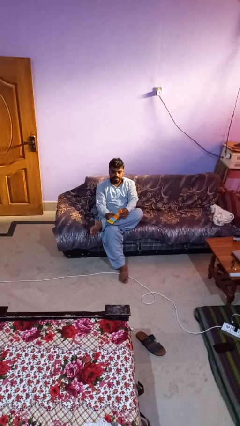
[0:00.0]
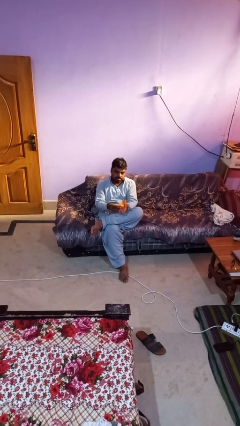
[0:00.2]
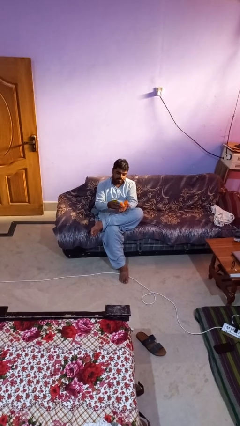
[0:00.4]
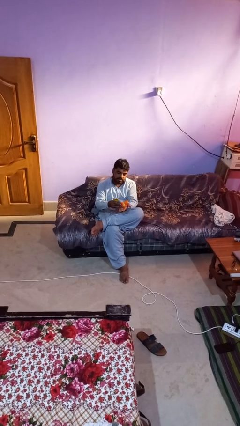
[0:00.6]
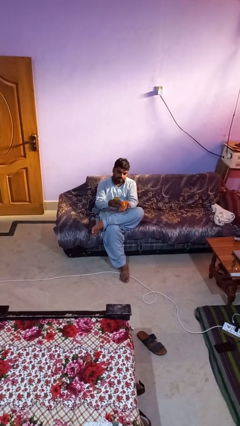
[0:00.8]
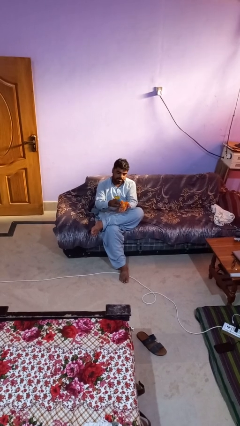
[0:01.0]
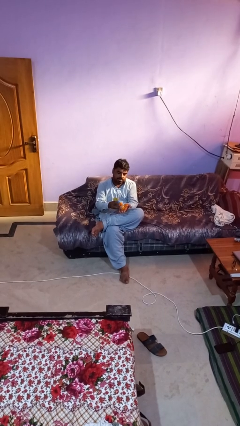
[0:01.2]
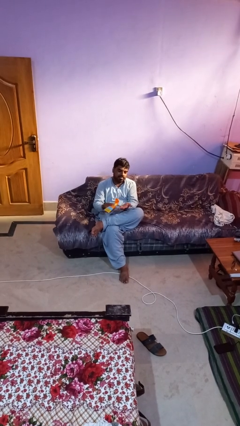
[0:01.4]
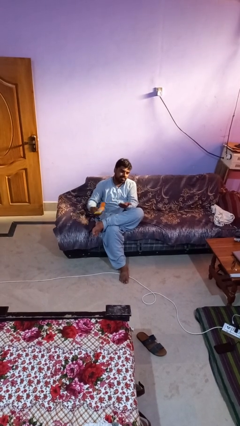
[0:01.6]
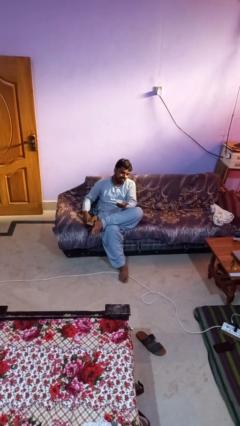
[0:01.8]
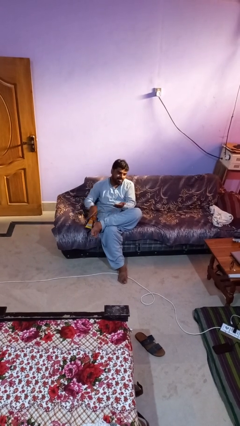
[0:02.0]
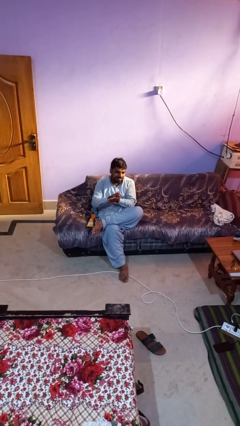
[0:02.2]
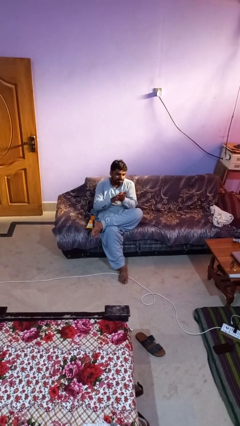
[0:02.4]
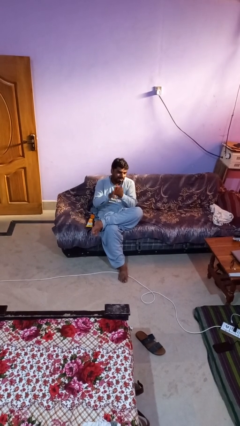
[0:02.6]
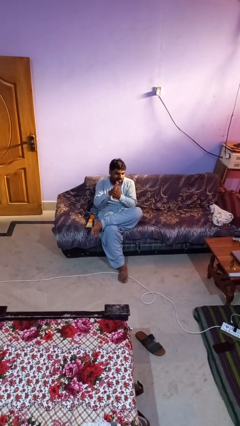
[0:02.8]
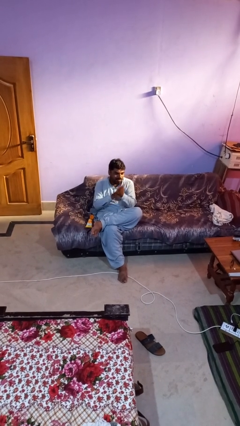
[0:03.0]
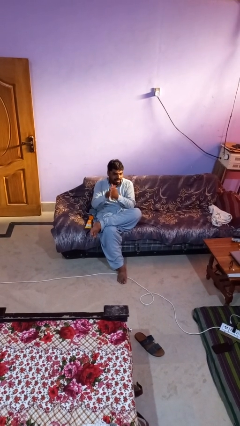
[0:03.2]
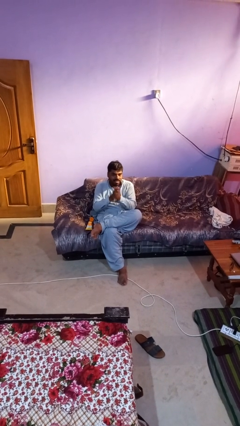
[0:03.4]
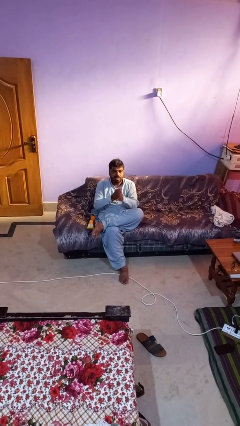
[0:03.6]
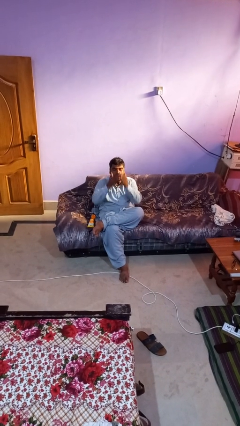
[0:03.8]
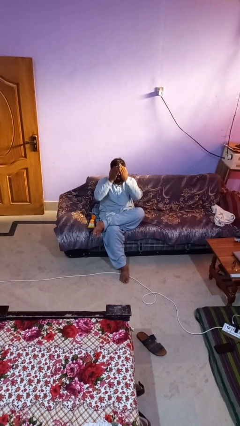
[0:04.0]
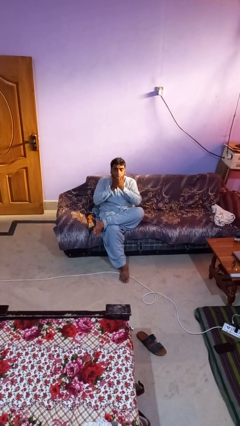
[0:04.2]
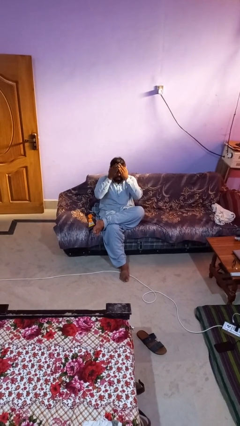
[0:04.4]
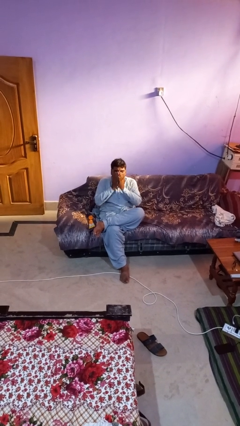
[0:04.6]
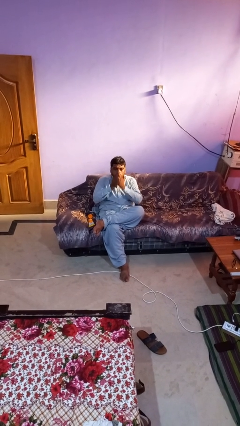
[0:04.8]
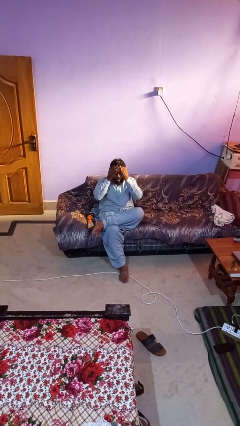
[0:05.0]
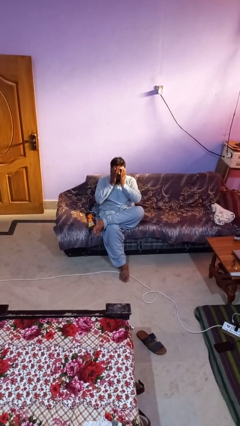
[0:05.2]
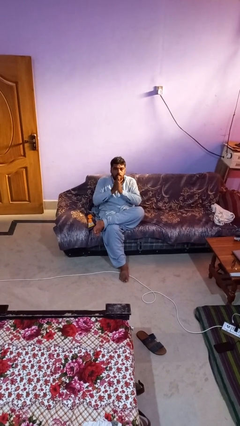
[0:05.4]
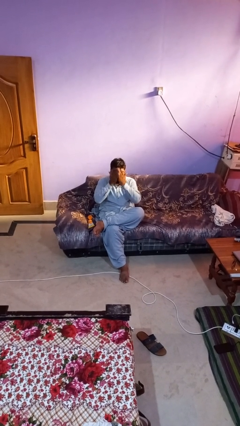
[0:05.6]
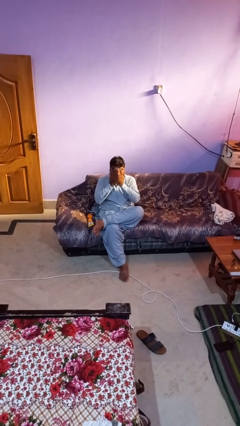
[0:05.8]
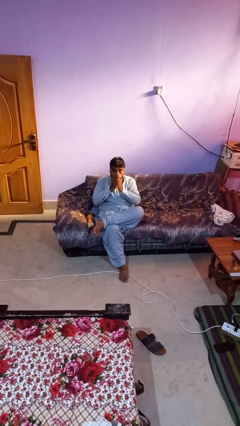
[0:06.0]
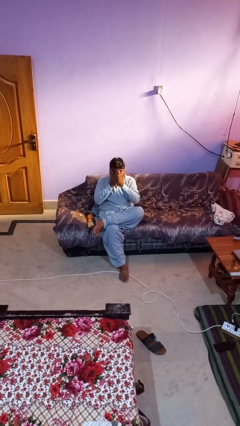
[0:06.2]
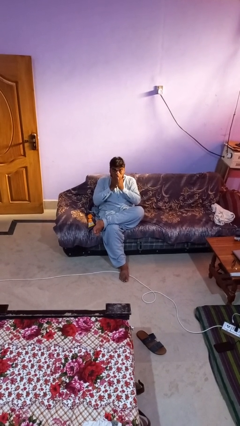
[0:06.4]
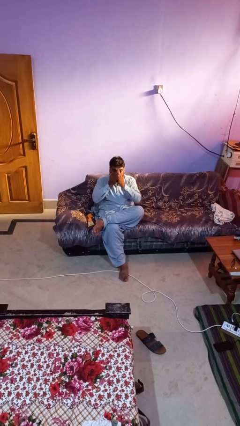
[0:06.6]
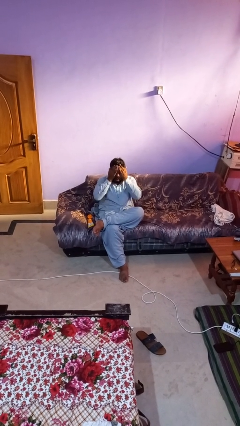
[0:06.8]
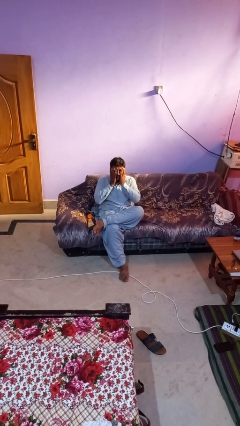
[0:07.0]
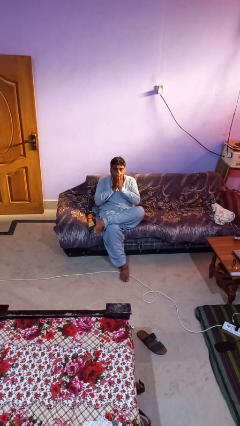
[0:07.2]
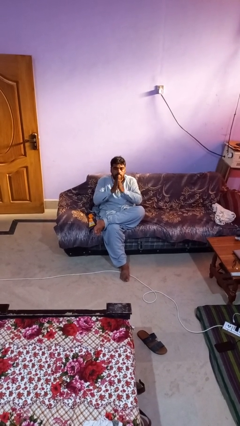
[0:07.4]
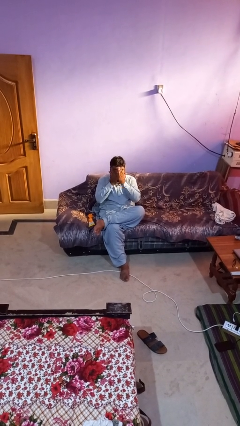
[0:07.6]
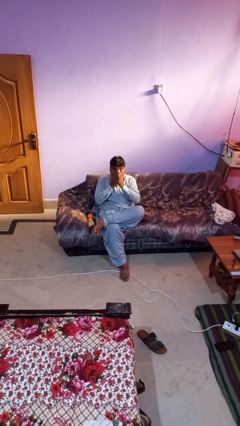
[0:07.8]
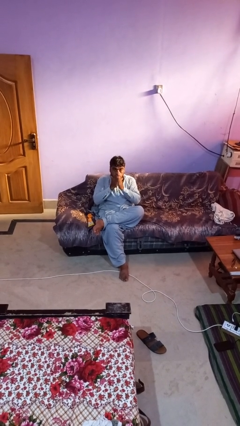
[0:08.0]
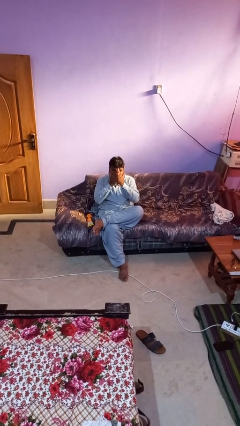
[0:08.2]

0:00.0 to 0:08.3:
person applies facial moisturizer

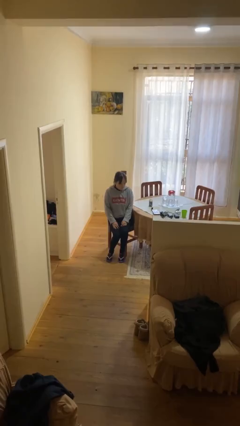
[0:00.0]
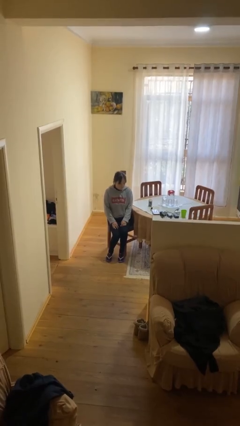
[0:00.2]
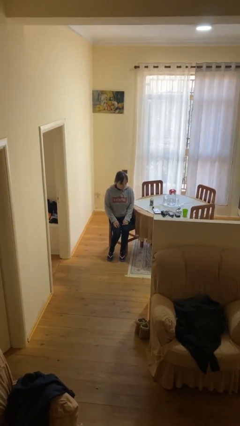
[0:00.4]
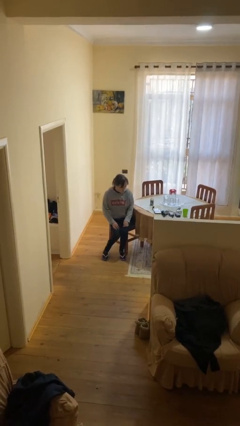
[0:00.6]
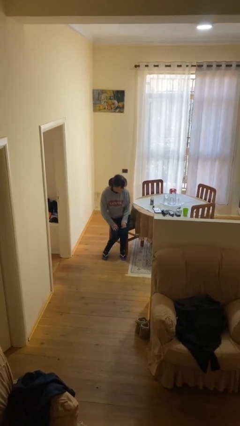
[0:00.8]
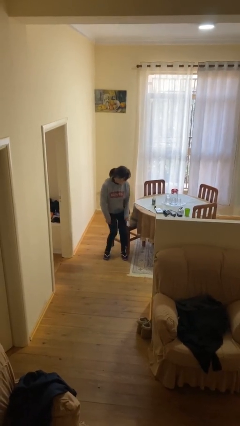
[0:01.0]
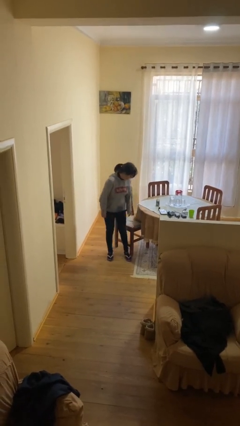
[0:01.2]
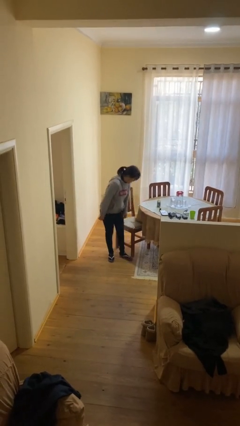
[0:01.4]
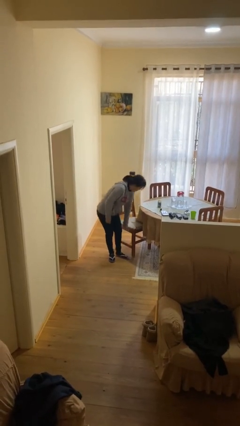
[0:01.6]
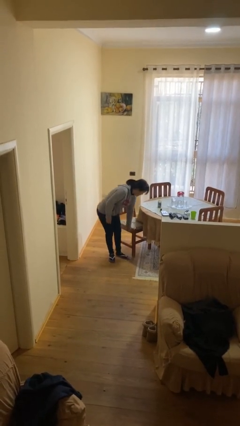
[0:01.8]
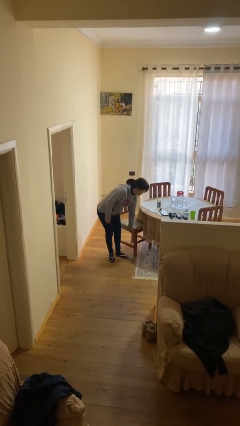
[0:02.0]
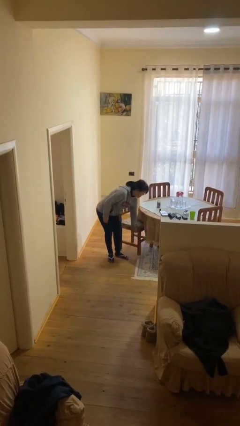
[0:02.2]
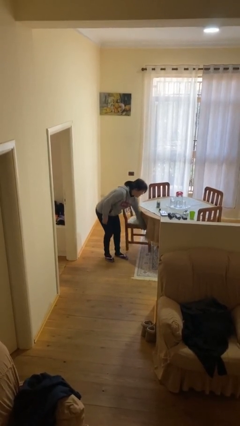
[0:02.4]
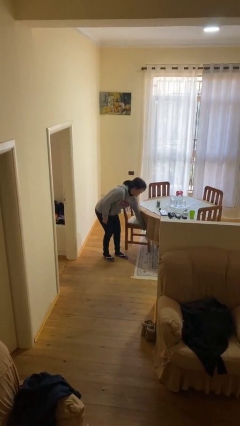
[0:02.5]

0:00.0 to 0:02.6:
person stands up

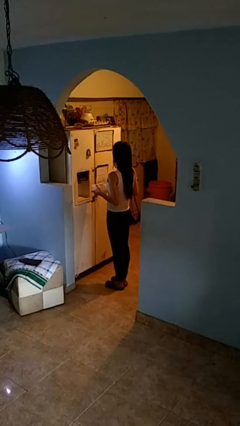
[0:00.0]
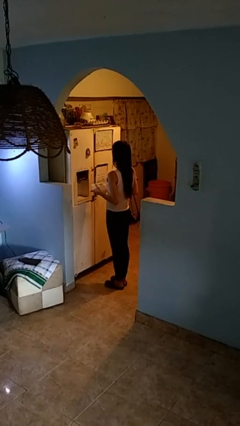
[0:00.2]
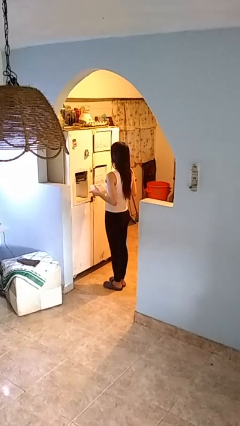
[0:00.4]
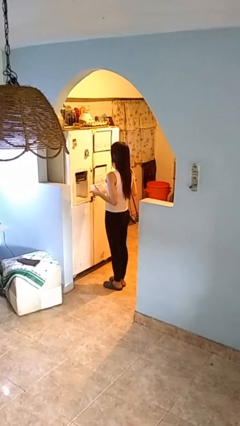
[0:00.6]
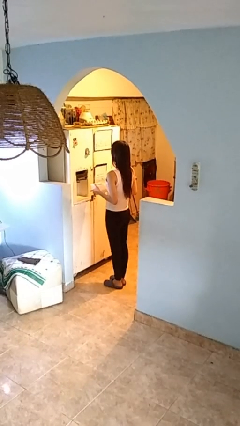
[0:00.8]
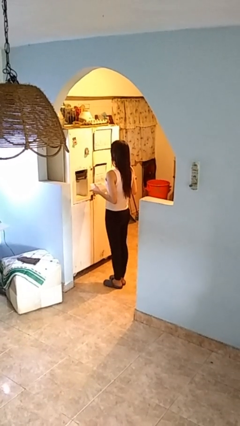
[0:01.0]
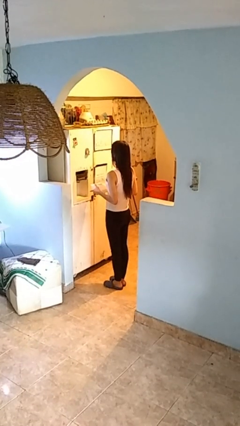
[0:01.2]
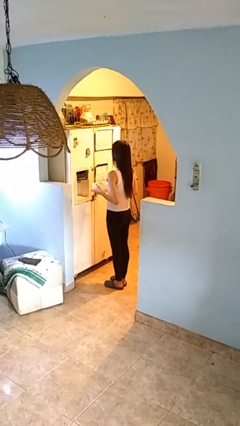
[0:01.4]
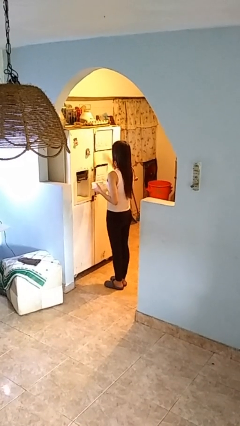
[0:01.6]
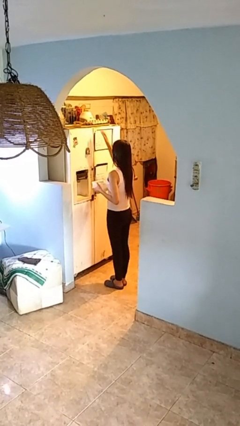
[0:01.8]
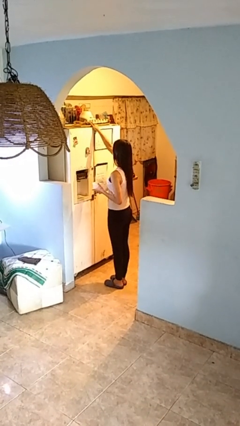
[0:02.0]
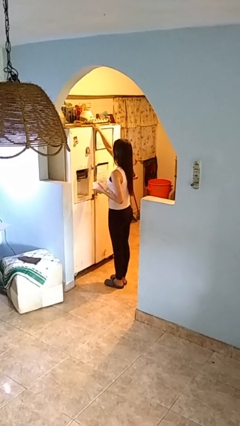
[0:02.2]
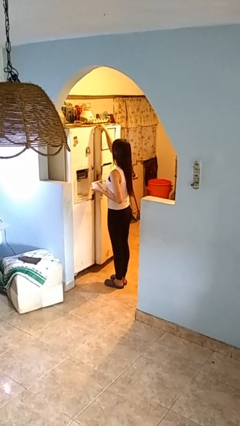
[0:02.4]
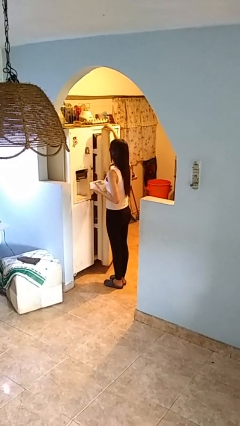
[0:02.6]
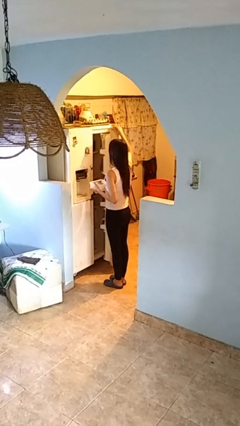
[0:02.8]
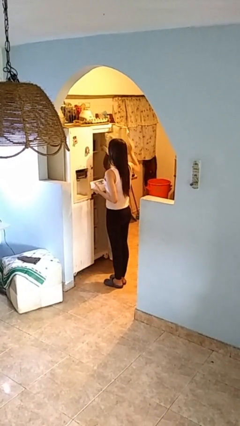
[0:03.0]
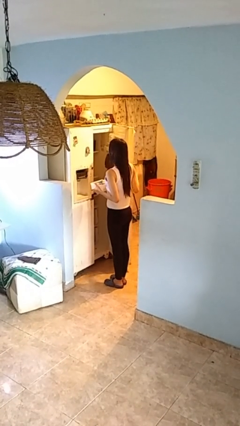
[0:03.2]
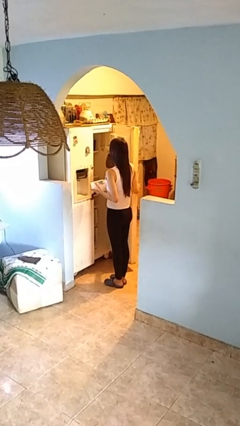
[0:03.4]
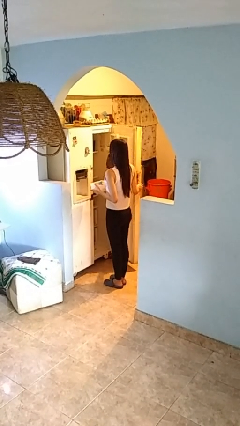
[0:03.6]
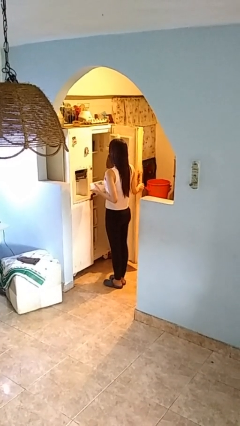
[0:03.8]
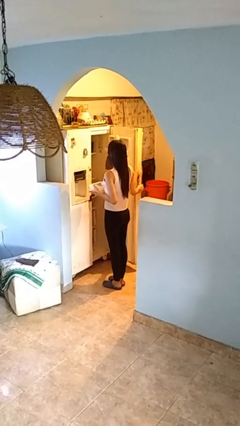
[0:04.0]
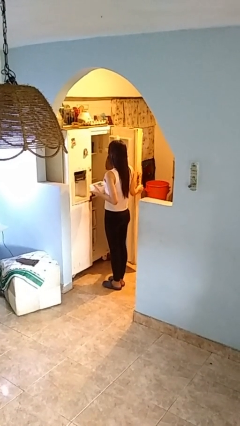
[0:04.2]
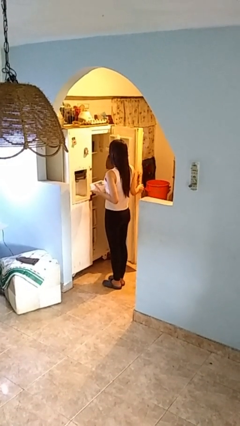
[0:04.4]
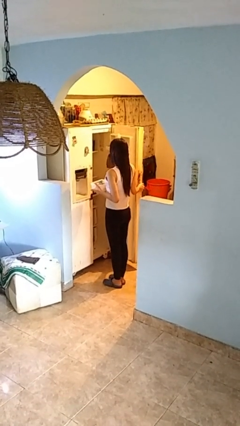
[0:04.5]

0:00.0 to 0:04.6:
person opens refrigerator

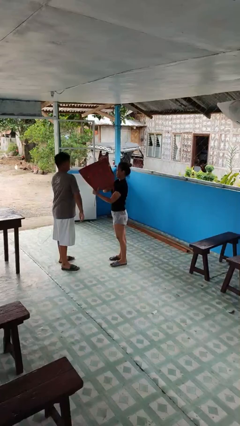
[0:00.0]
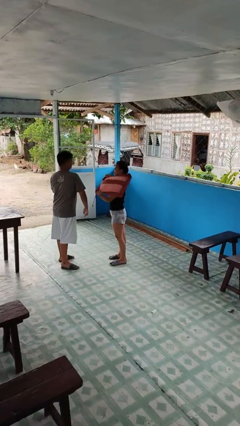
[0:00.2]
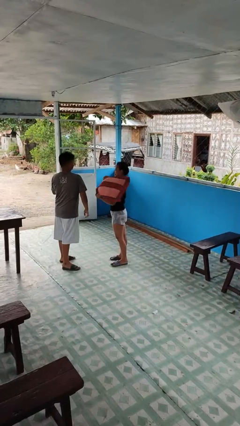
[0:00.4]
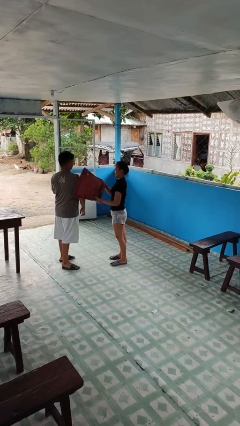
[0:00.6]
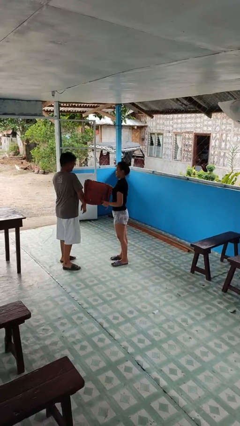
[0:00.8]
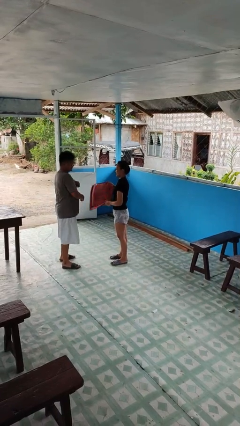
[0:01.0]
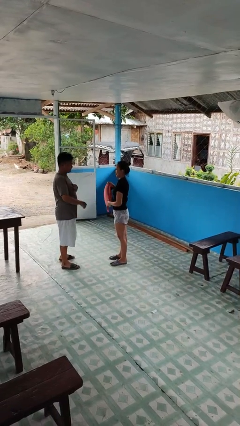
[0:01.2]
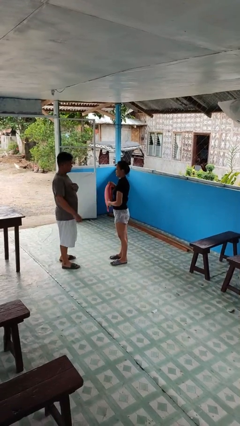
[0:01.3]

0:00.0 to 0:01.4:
person hits person with pillow

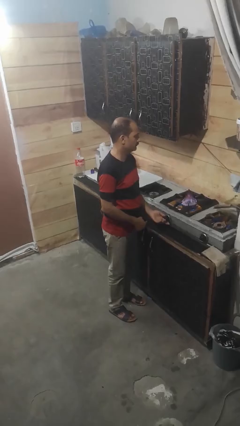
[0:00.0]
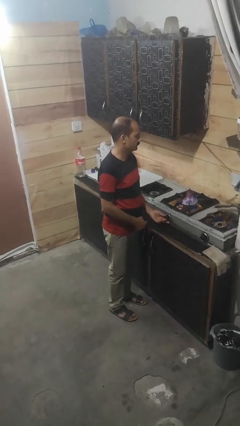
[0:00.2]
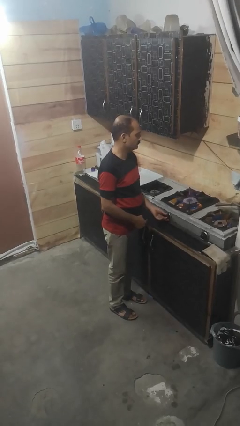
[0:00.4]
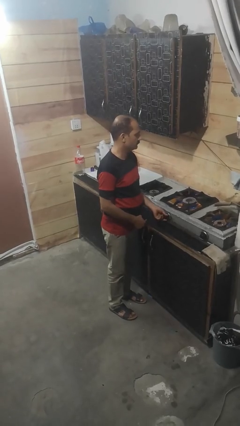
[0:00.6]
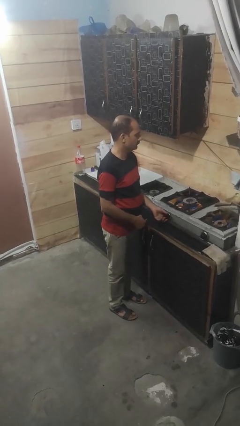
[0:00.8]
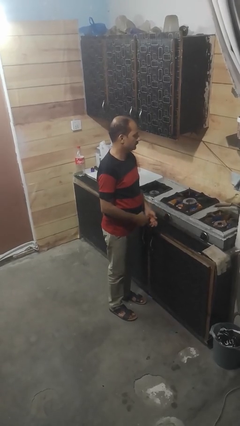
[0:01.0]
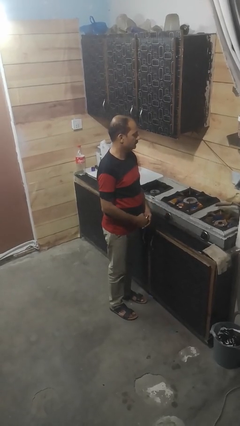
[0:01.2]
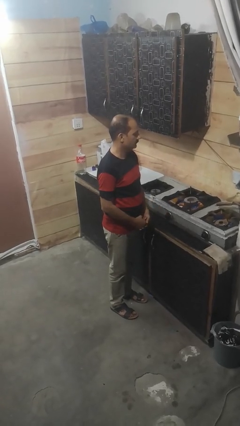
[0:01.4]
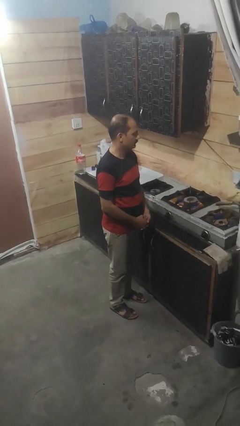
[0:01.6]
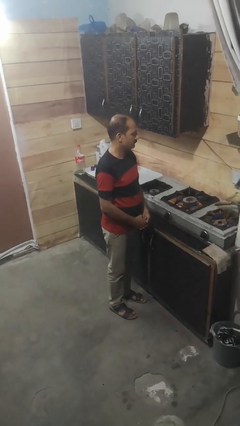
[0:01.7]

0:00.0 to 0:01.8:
person turns off stovetop
